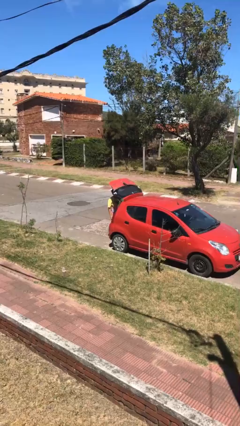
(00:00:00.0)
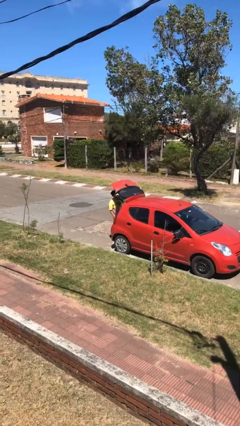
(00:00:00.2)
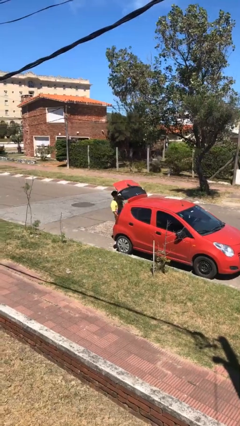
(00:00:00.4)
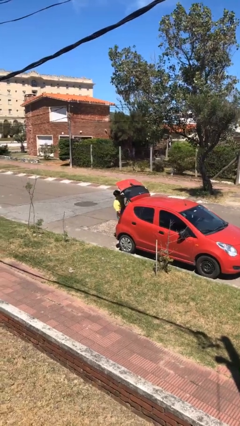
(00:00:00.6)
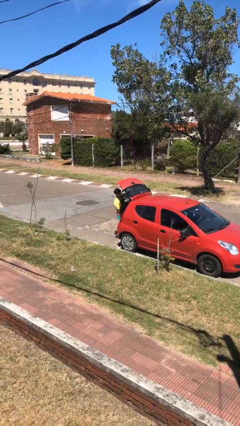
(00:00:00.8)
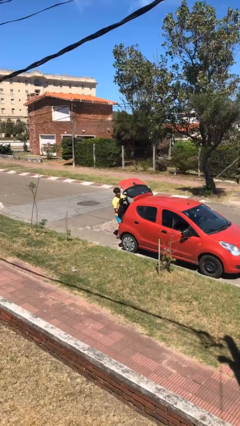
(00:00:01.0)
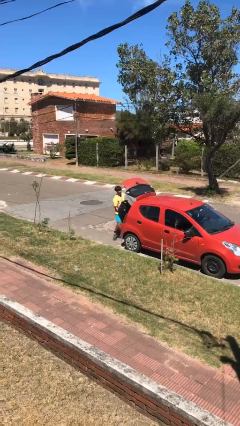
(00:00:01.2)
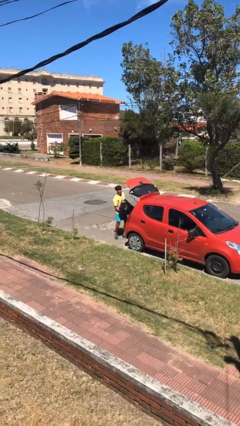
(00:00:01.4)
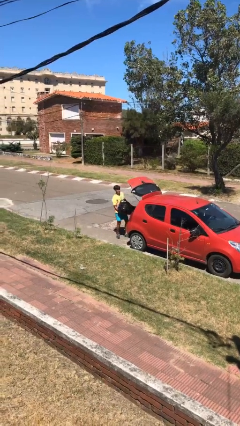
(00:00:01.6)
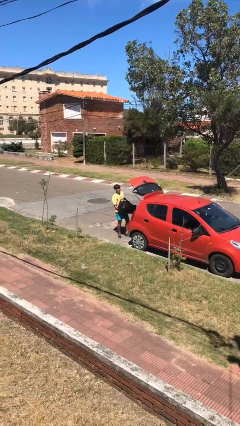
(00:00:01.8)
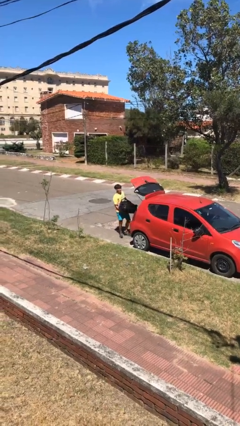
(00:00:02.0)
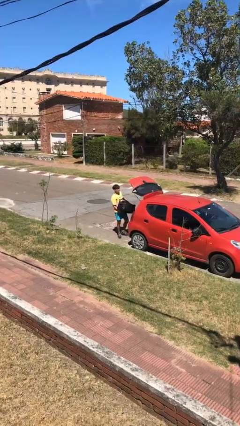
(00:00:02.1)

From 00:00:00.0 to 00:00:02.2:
person unloads car

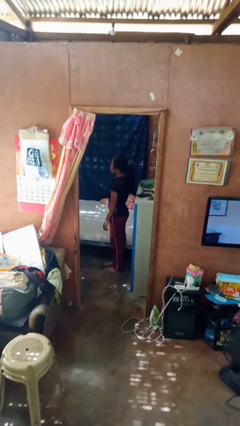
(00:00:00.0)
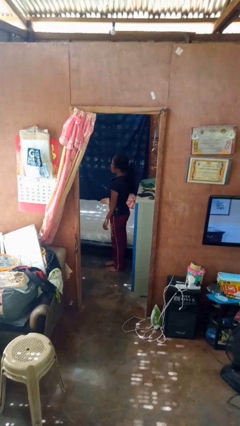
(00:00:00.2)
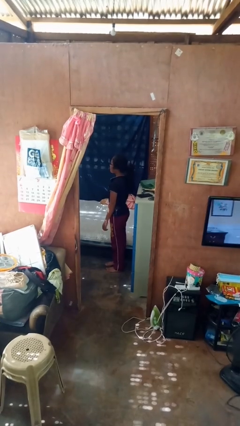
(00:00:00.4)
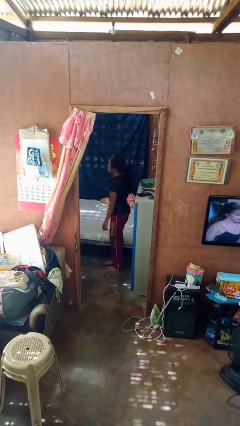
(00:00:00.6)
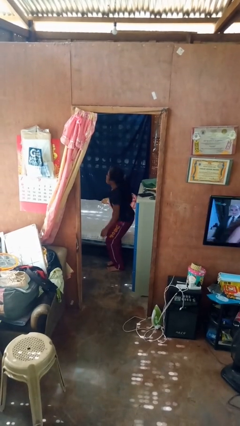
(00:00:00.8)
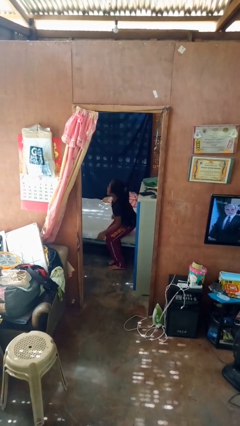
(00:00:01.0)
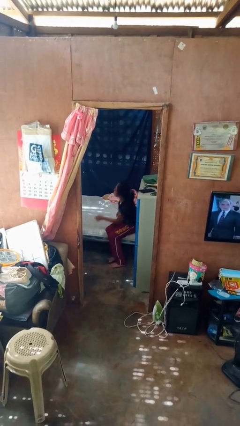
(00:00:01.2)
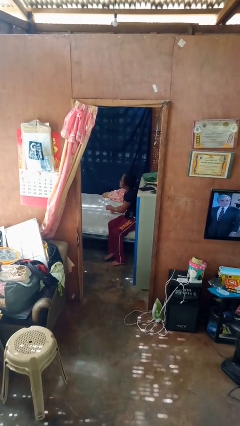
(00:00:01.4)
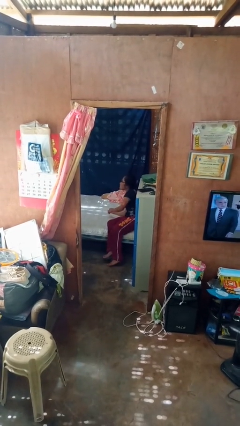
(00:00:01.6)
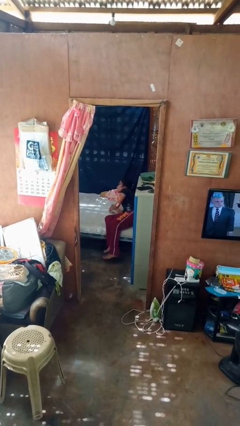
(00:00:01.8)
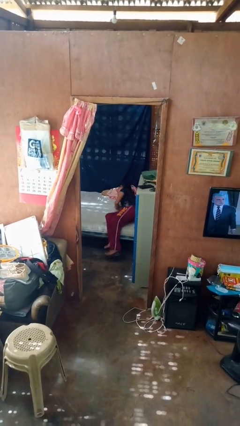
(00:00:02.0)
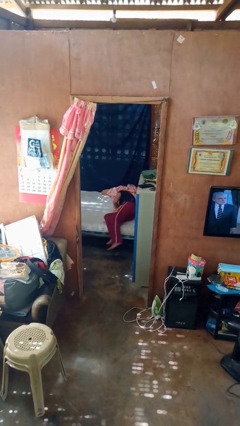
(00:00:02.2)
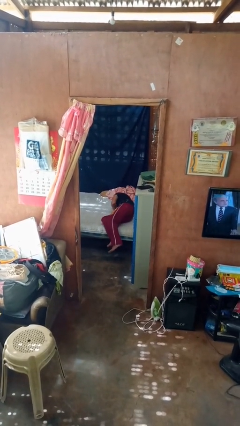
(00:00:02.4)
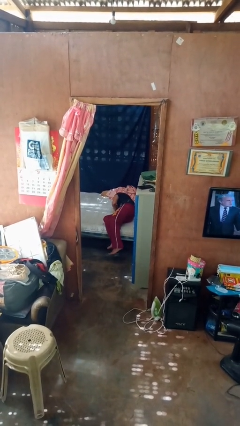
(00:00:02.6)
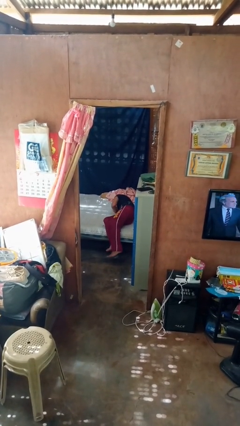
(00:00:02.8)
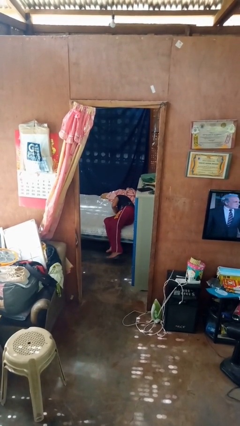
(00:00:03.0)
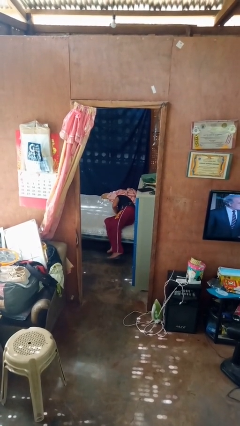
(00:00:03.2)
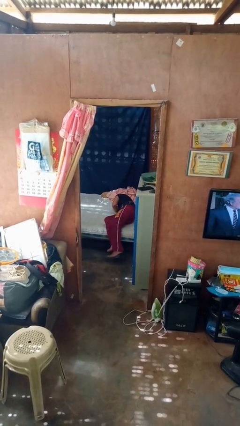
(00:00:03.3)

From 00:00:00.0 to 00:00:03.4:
person lies down on bed

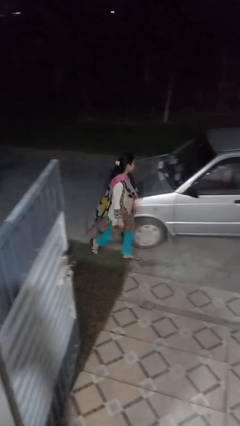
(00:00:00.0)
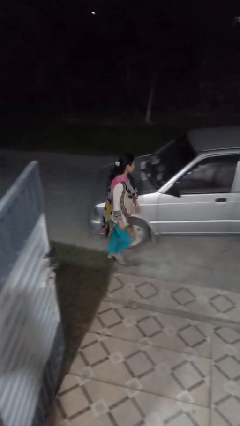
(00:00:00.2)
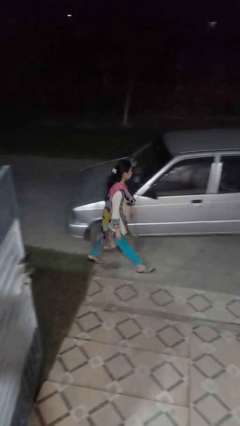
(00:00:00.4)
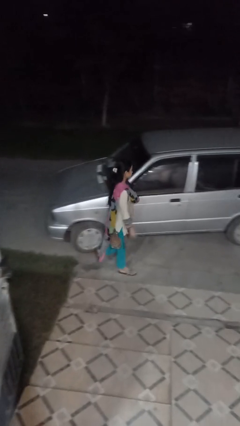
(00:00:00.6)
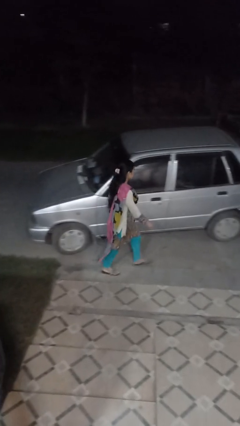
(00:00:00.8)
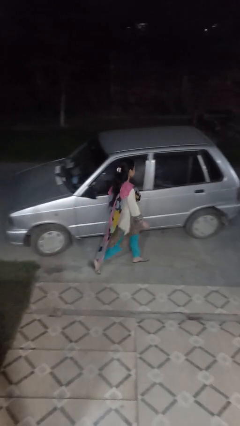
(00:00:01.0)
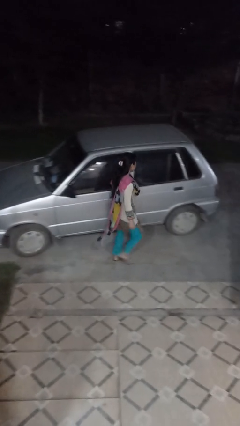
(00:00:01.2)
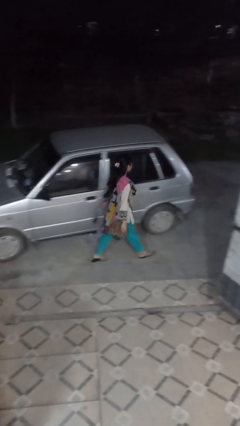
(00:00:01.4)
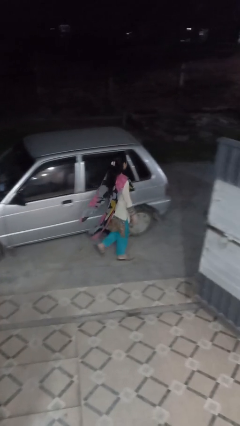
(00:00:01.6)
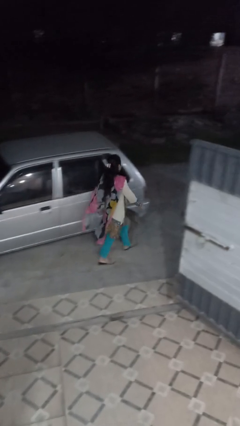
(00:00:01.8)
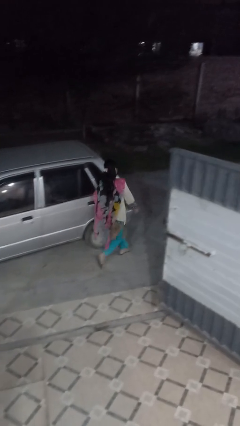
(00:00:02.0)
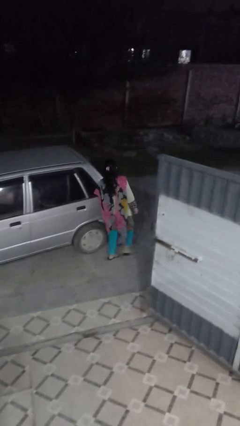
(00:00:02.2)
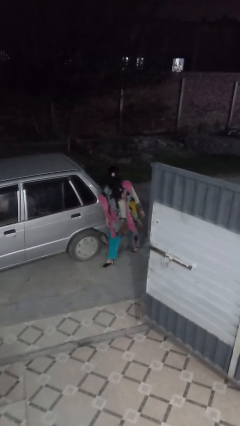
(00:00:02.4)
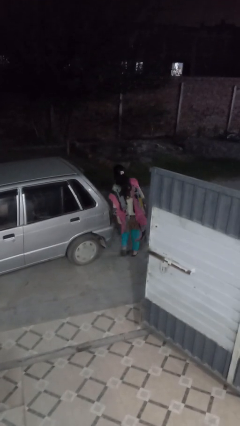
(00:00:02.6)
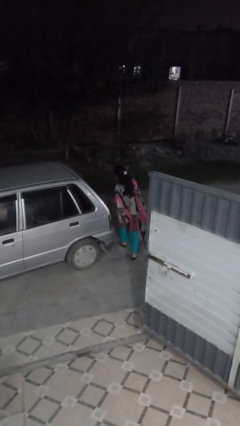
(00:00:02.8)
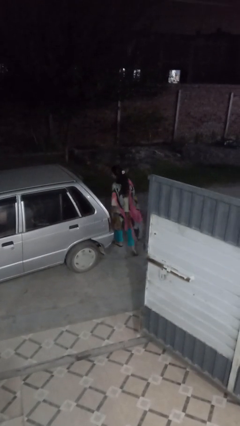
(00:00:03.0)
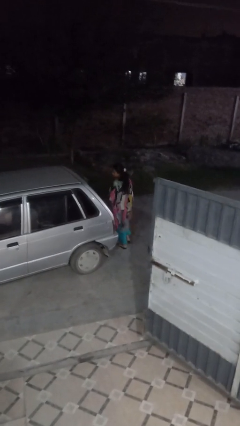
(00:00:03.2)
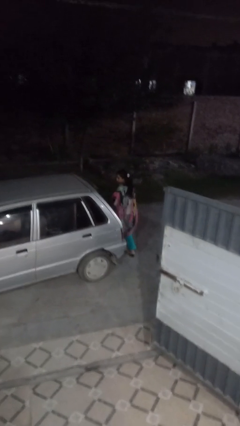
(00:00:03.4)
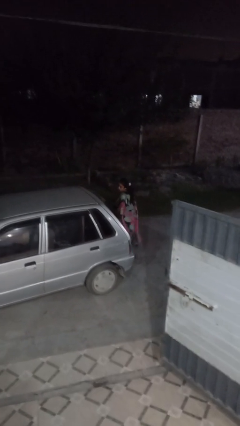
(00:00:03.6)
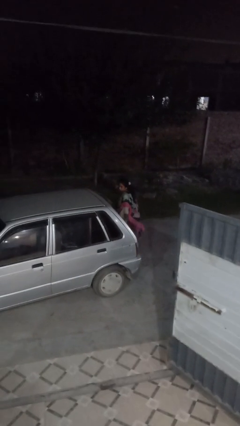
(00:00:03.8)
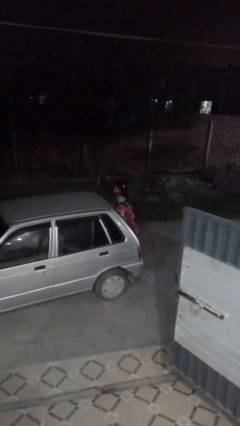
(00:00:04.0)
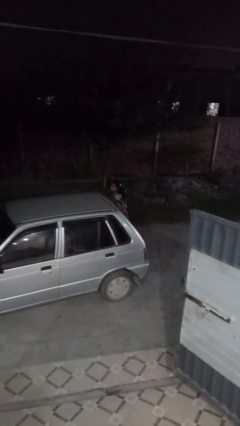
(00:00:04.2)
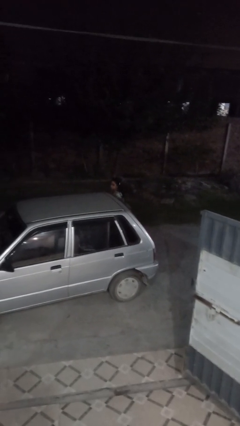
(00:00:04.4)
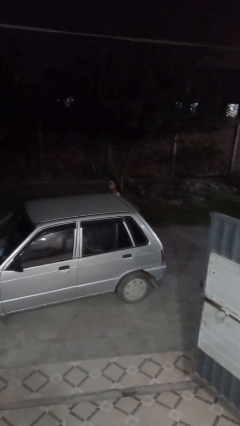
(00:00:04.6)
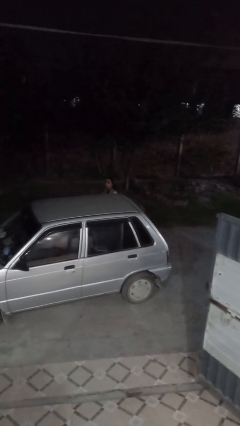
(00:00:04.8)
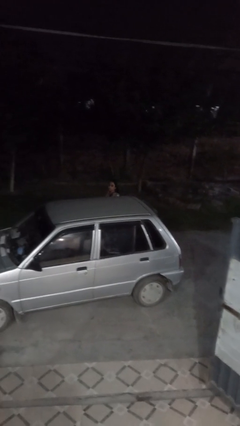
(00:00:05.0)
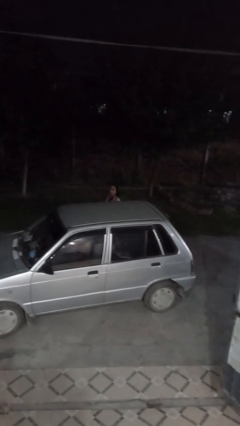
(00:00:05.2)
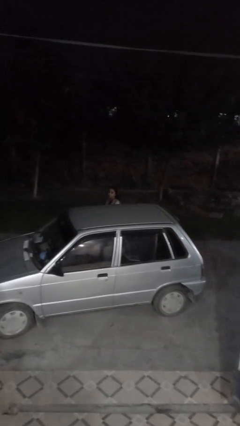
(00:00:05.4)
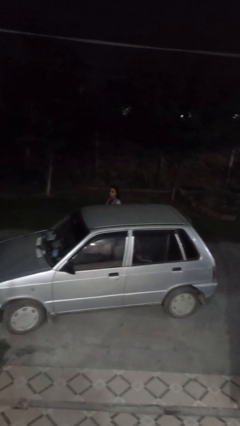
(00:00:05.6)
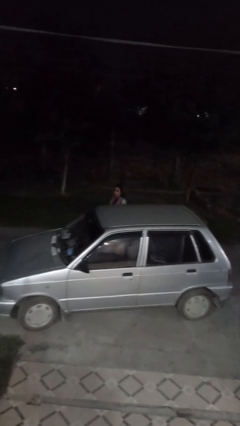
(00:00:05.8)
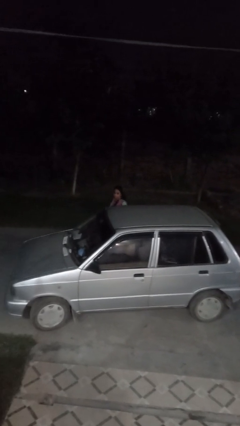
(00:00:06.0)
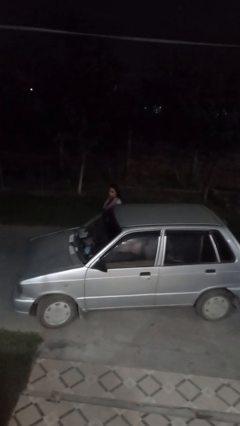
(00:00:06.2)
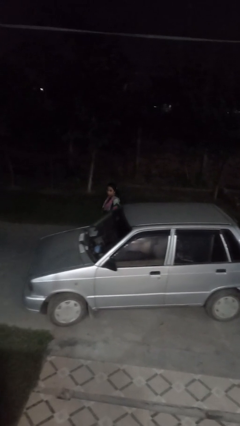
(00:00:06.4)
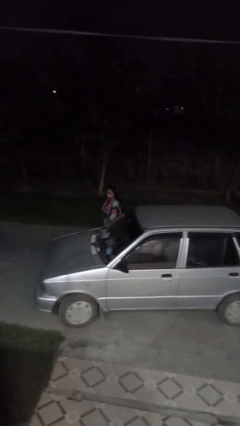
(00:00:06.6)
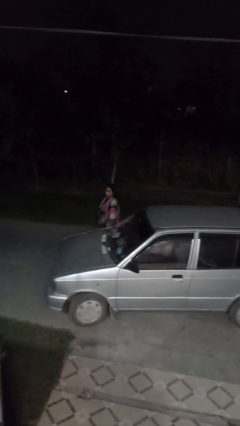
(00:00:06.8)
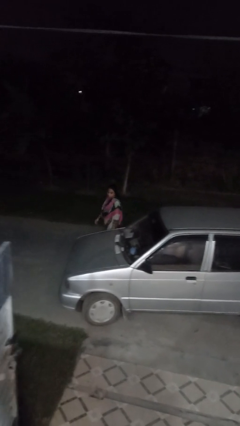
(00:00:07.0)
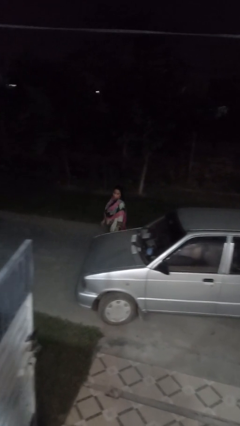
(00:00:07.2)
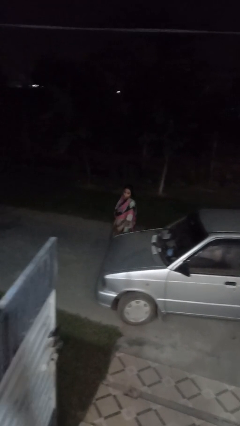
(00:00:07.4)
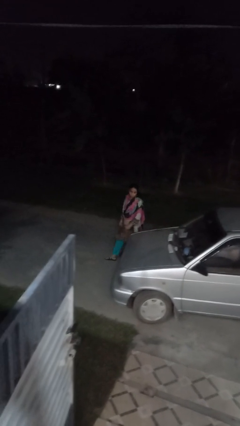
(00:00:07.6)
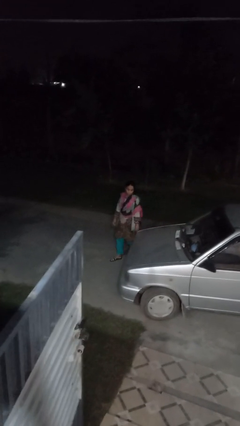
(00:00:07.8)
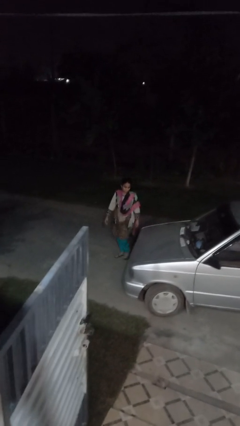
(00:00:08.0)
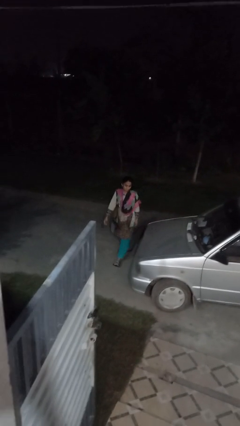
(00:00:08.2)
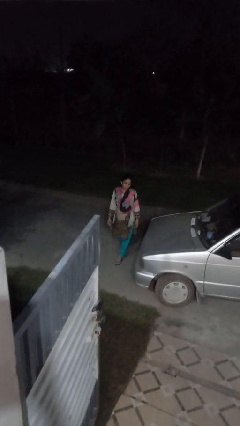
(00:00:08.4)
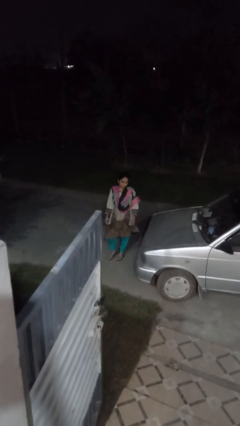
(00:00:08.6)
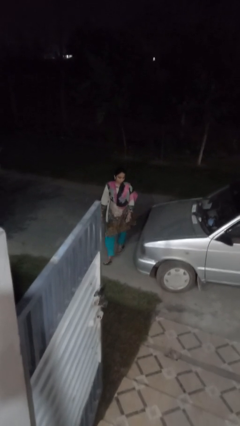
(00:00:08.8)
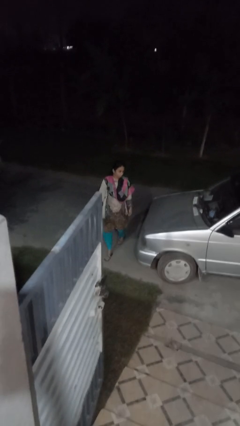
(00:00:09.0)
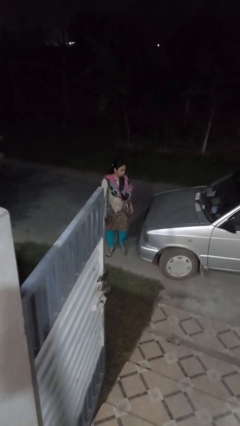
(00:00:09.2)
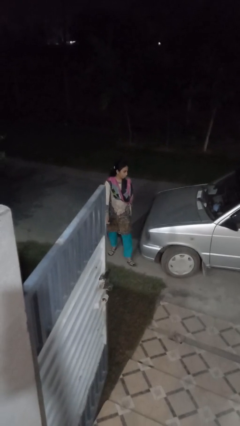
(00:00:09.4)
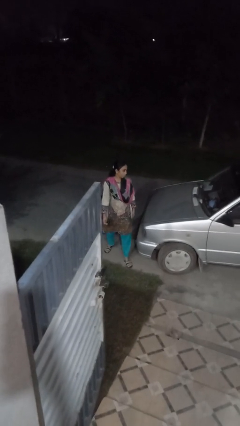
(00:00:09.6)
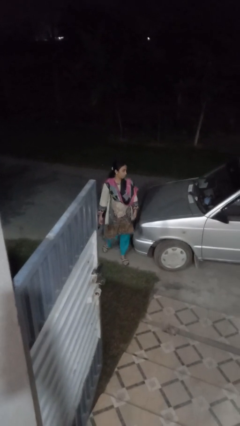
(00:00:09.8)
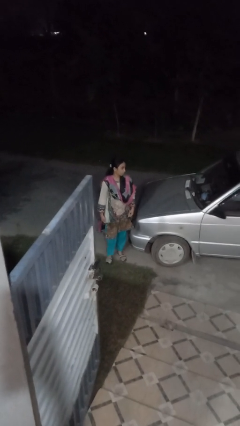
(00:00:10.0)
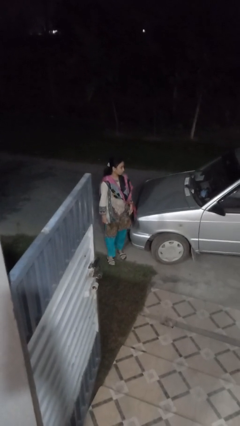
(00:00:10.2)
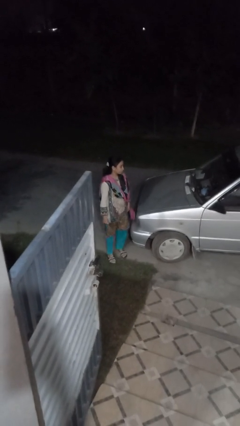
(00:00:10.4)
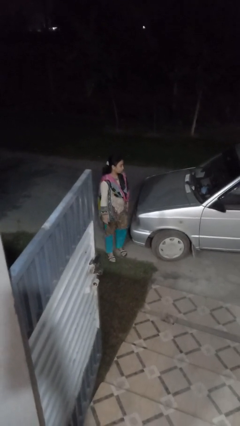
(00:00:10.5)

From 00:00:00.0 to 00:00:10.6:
person walks around car

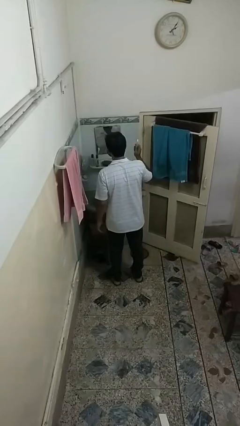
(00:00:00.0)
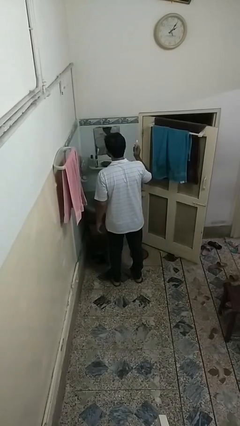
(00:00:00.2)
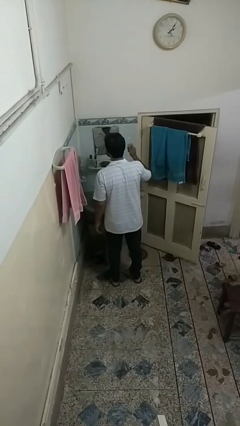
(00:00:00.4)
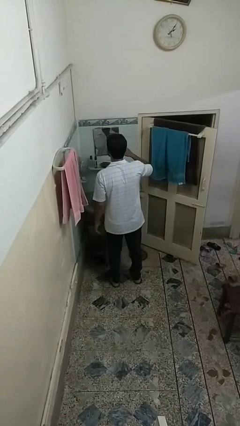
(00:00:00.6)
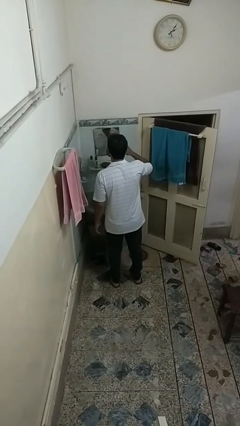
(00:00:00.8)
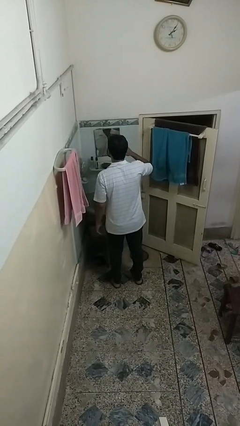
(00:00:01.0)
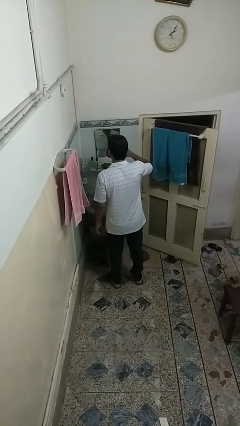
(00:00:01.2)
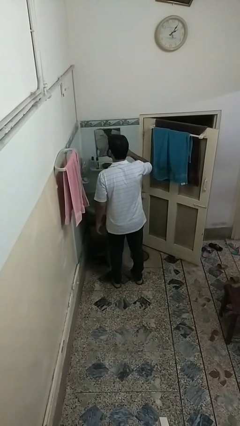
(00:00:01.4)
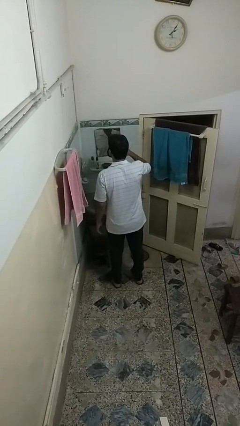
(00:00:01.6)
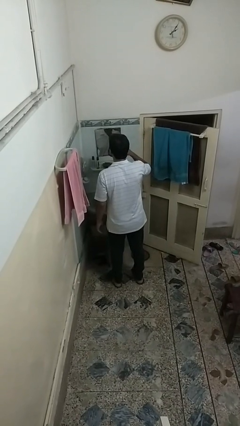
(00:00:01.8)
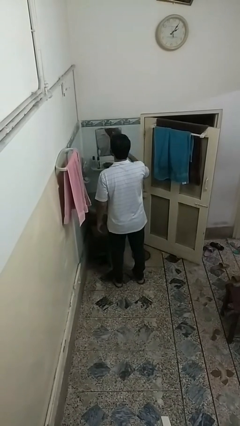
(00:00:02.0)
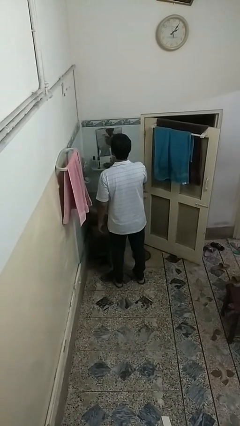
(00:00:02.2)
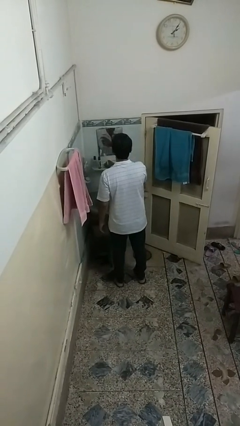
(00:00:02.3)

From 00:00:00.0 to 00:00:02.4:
person brushes teeth
